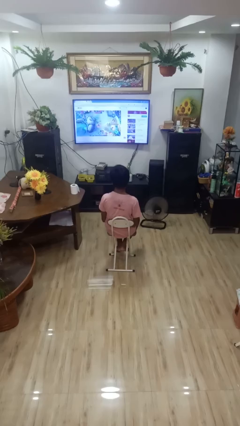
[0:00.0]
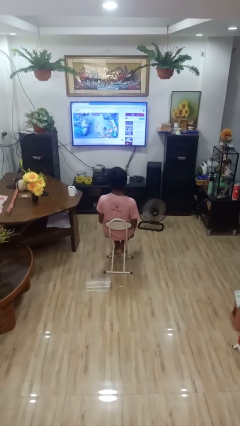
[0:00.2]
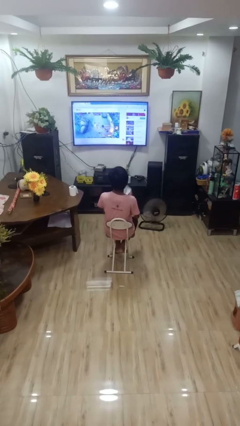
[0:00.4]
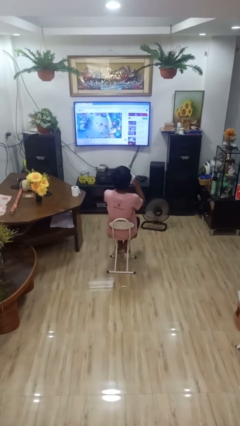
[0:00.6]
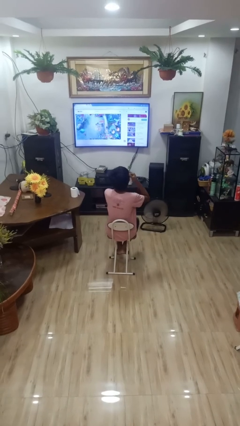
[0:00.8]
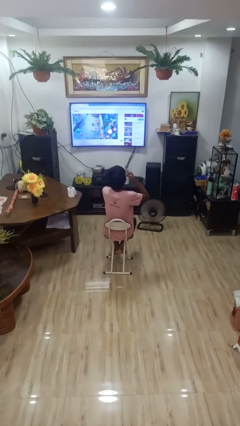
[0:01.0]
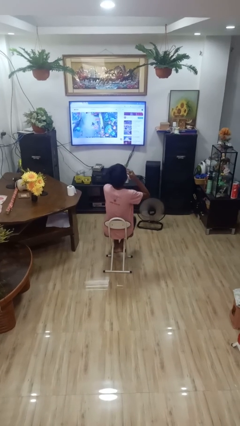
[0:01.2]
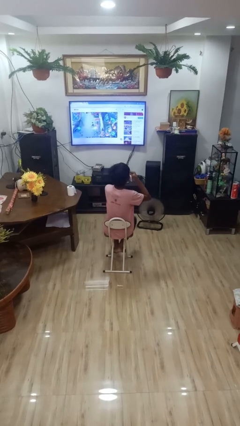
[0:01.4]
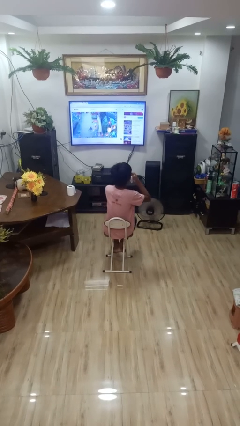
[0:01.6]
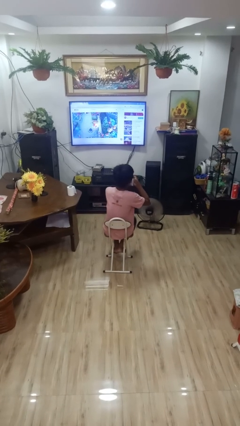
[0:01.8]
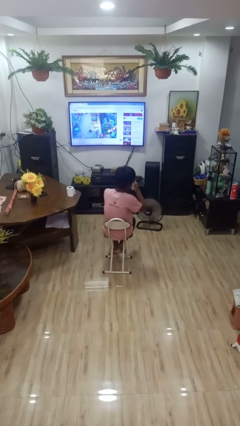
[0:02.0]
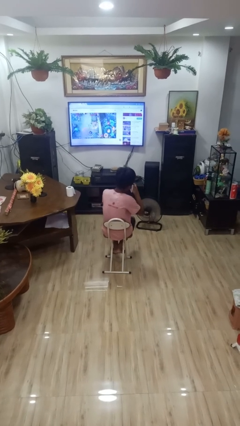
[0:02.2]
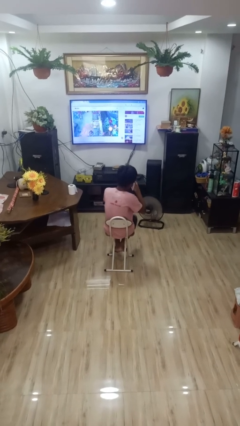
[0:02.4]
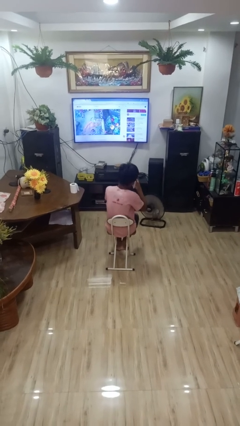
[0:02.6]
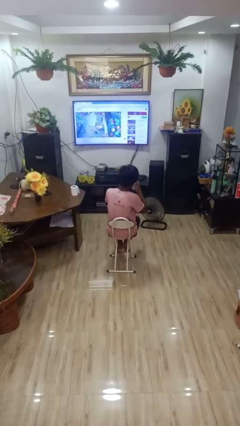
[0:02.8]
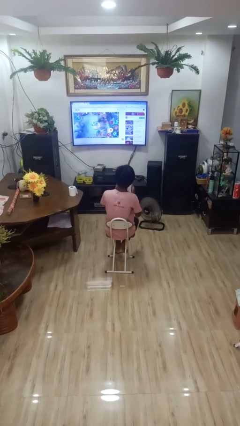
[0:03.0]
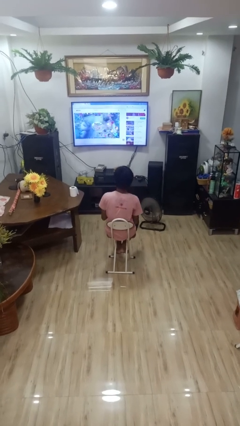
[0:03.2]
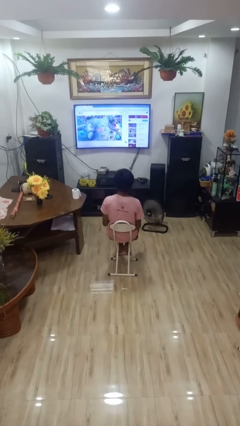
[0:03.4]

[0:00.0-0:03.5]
person blows nose

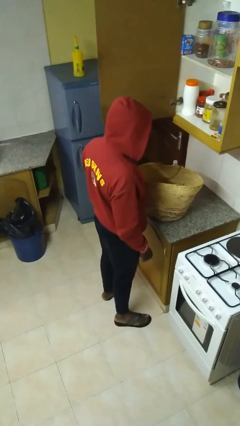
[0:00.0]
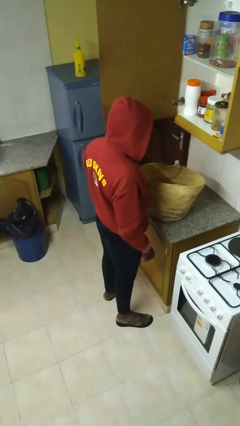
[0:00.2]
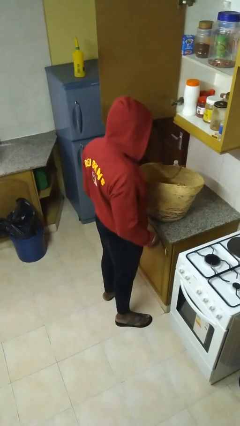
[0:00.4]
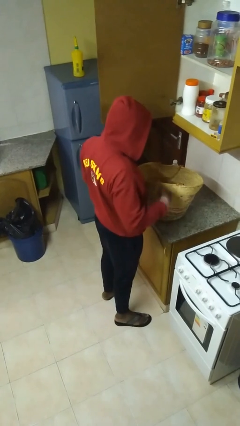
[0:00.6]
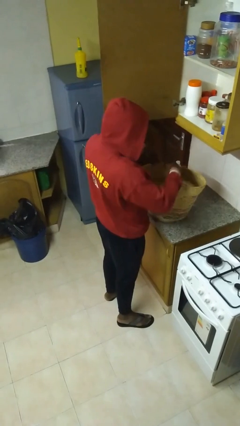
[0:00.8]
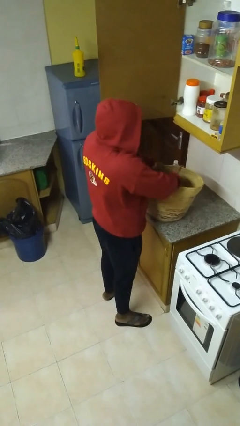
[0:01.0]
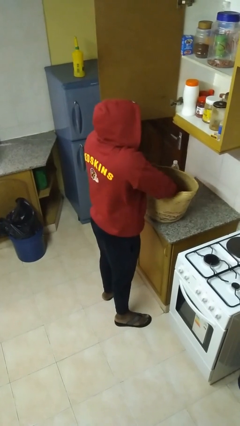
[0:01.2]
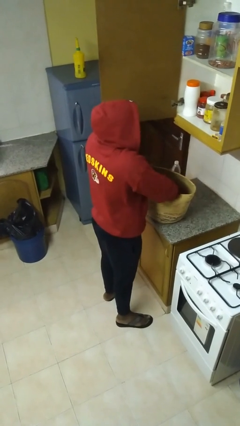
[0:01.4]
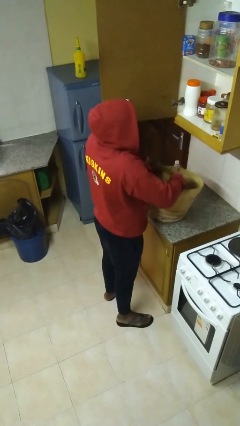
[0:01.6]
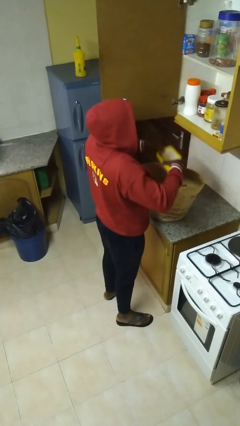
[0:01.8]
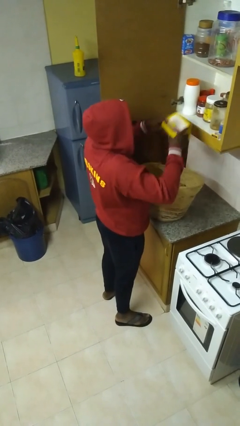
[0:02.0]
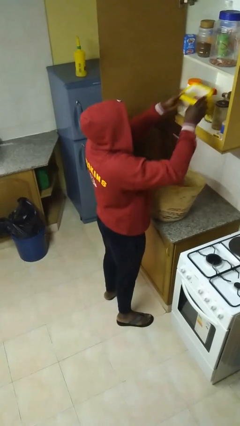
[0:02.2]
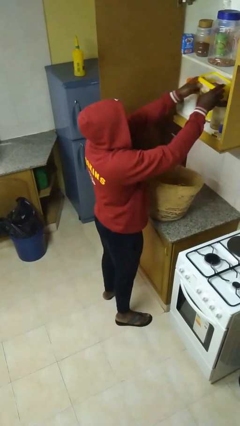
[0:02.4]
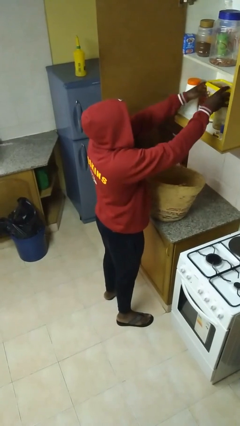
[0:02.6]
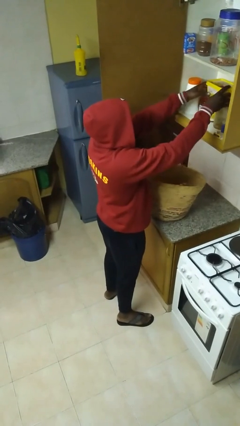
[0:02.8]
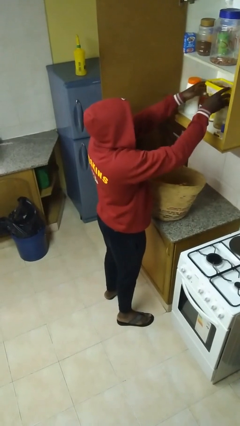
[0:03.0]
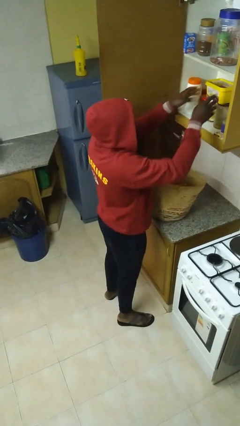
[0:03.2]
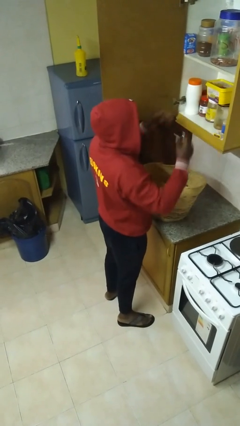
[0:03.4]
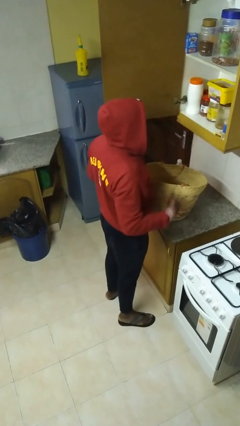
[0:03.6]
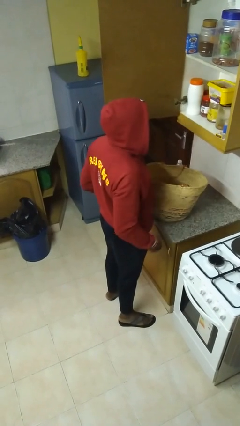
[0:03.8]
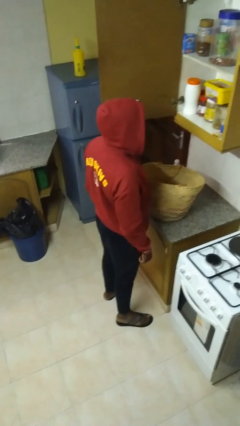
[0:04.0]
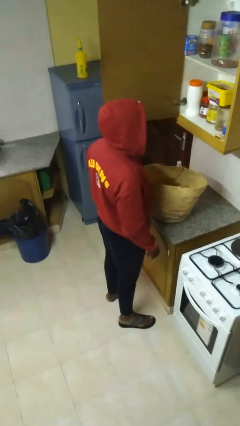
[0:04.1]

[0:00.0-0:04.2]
person loads groceries into cabinet

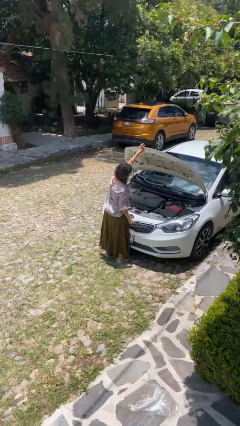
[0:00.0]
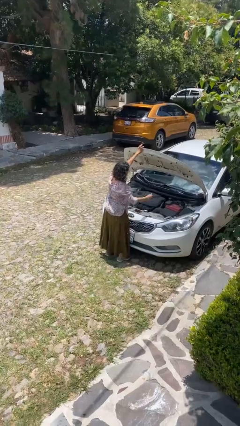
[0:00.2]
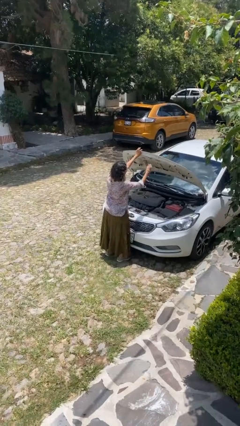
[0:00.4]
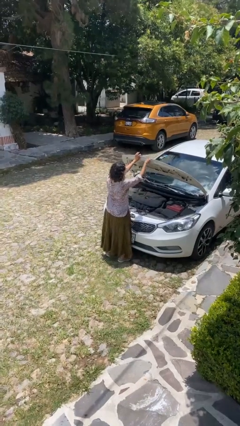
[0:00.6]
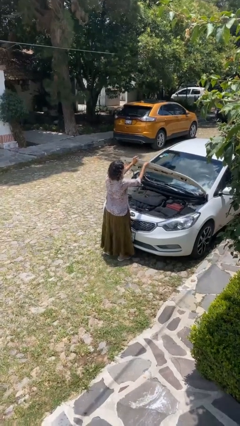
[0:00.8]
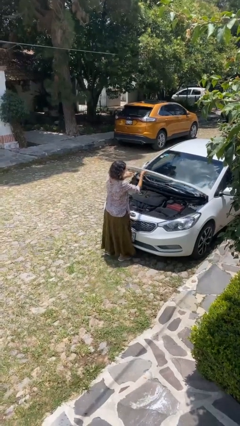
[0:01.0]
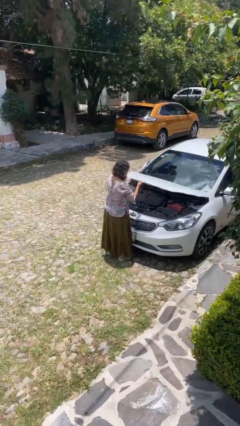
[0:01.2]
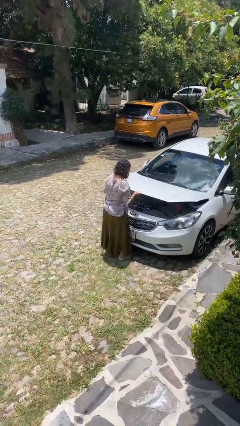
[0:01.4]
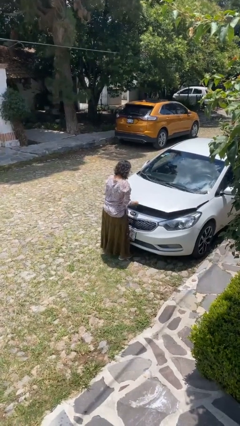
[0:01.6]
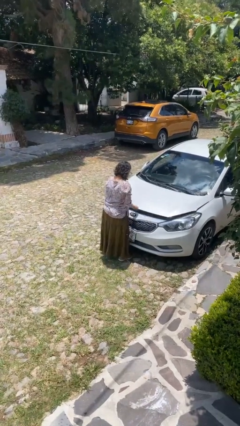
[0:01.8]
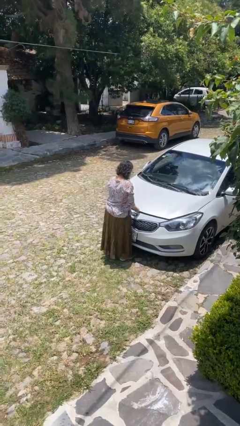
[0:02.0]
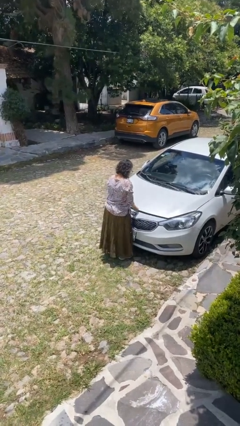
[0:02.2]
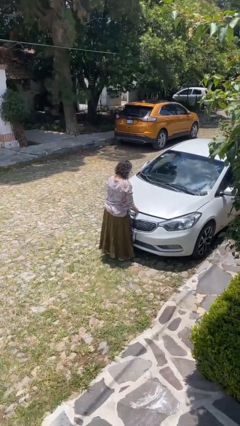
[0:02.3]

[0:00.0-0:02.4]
person closes car hood

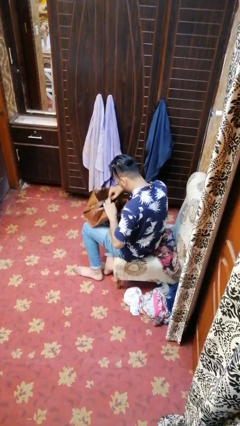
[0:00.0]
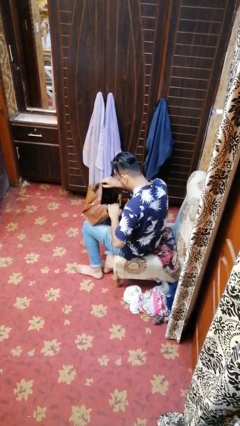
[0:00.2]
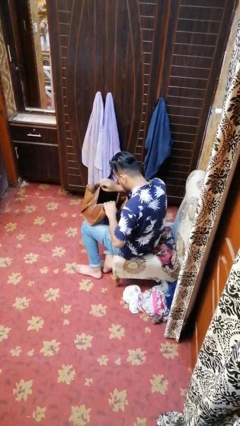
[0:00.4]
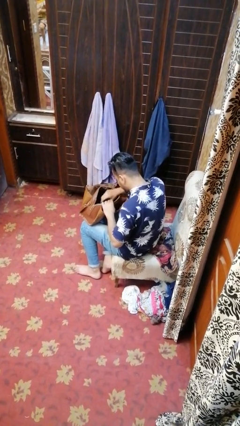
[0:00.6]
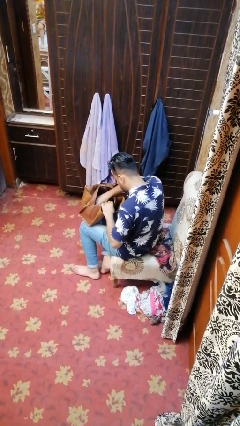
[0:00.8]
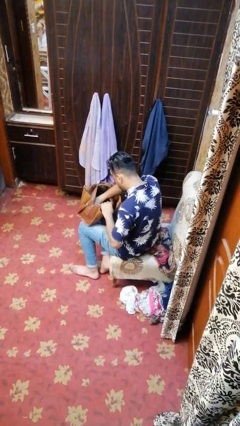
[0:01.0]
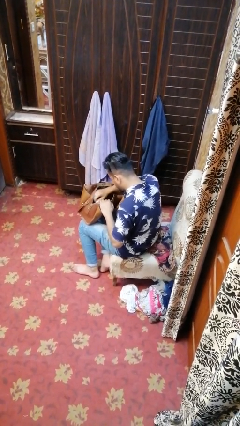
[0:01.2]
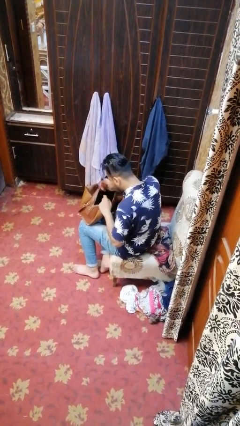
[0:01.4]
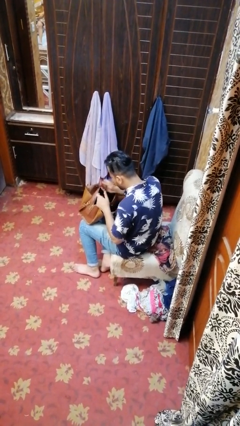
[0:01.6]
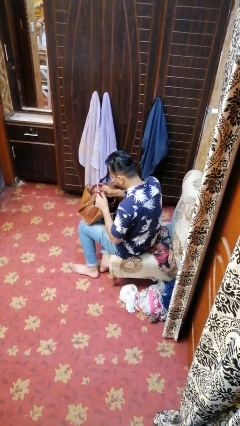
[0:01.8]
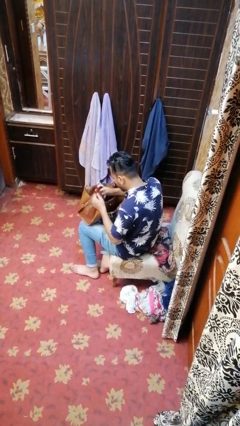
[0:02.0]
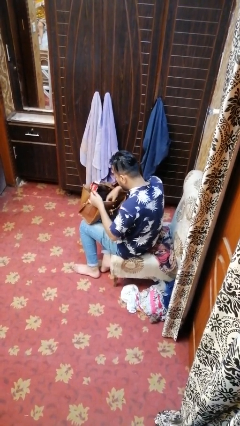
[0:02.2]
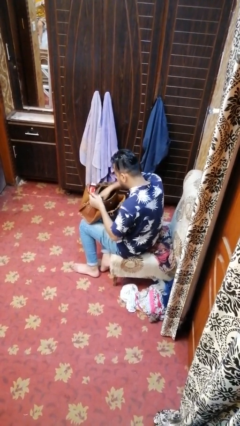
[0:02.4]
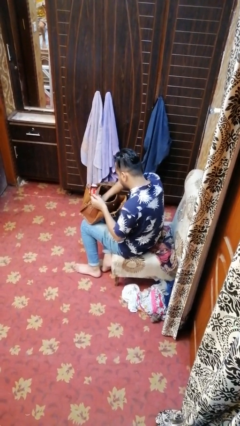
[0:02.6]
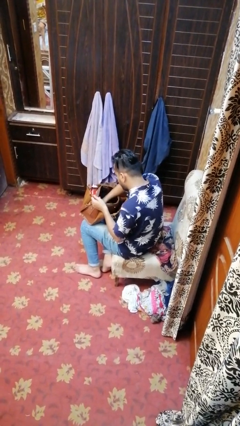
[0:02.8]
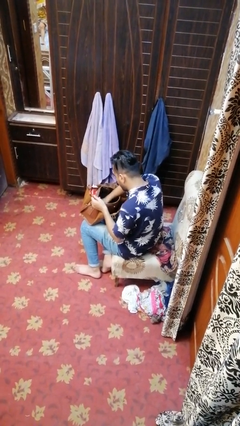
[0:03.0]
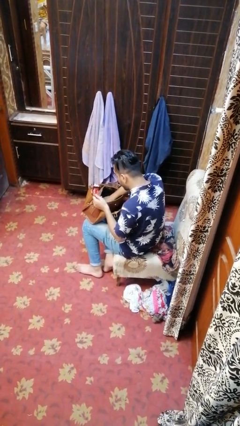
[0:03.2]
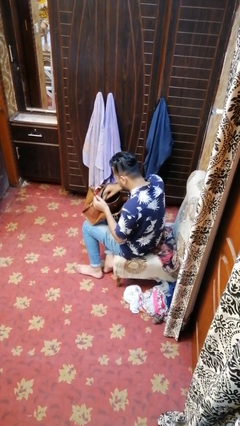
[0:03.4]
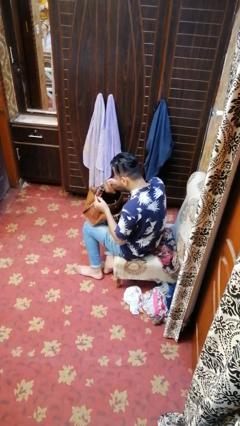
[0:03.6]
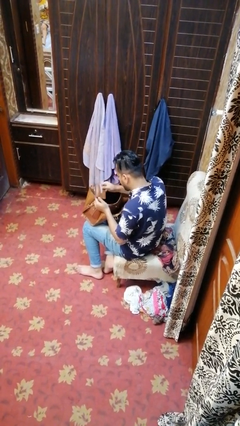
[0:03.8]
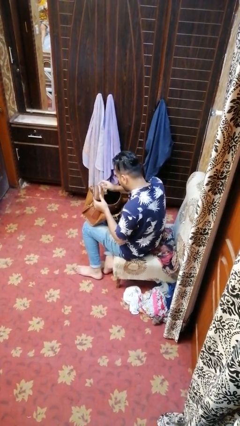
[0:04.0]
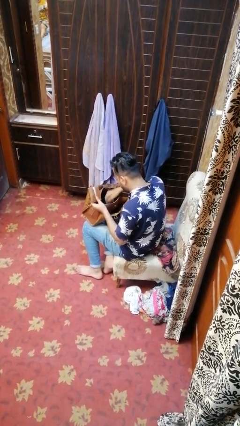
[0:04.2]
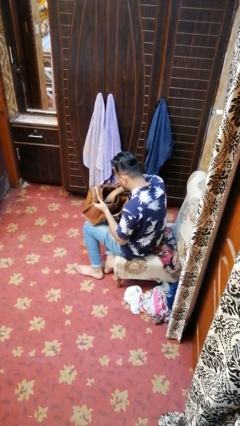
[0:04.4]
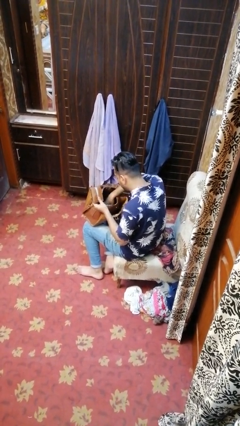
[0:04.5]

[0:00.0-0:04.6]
person takes object from purse

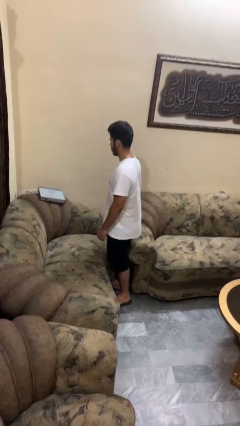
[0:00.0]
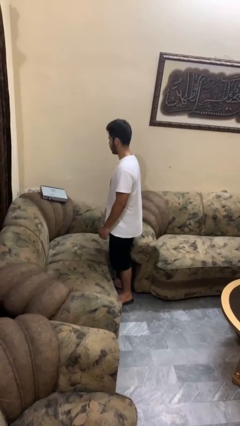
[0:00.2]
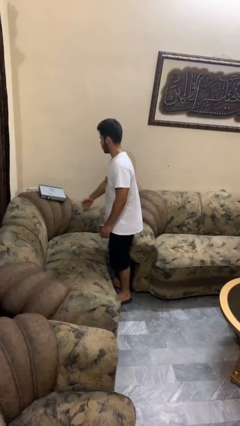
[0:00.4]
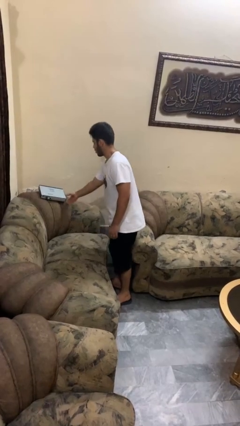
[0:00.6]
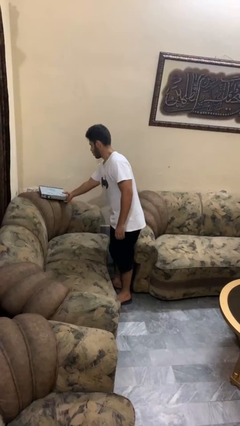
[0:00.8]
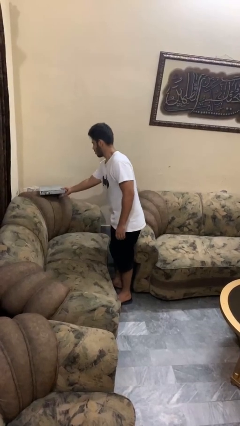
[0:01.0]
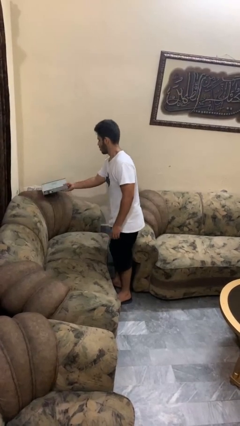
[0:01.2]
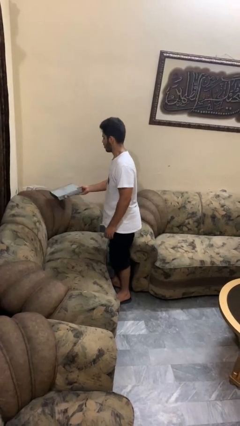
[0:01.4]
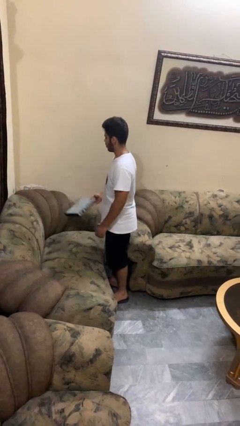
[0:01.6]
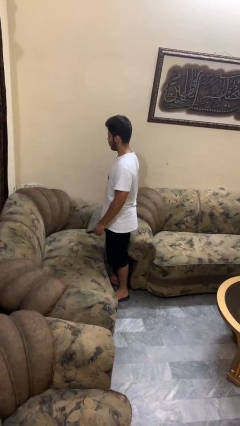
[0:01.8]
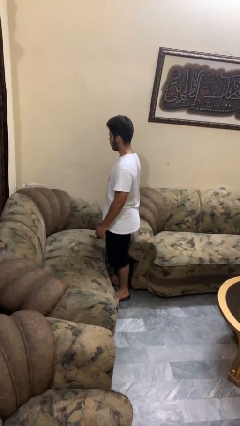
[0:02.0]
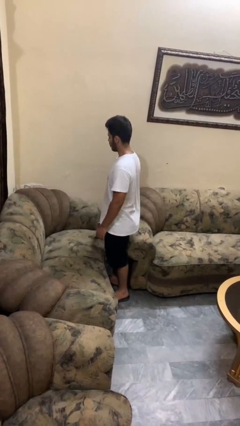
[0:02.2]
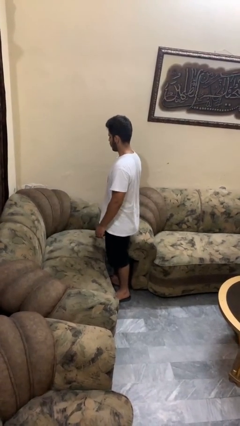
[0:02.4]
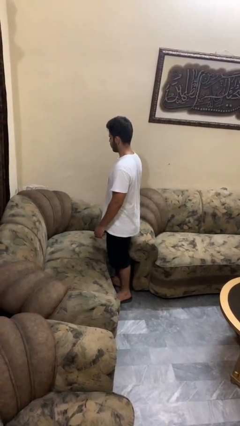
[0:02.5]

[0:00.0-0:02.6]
person picks up object from couch

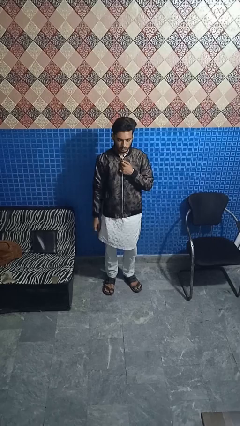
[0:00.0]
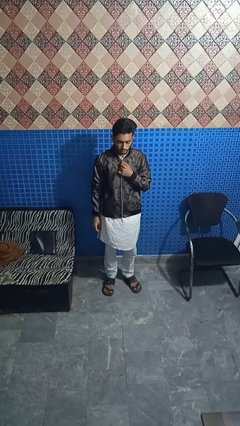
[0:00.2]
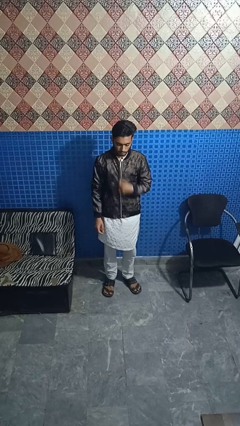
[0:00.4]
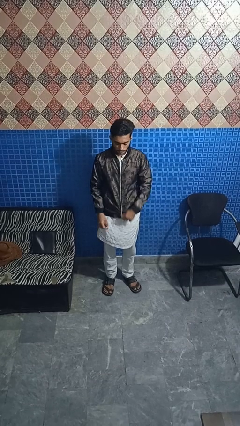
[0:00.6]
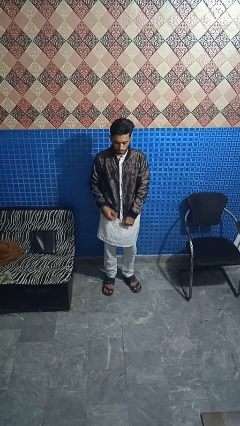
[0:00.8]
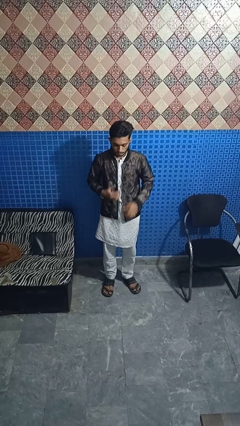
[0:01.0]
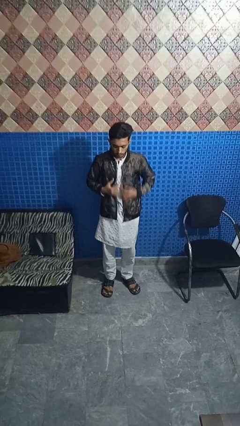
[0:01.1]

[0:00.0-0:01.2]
person unzips jacket
